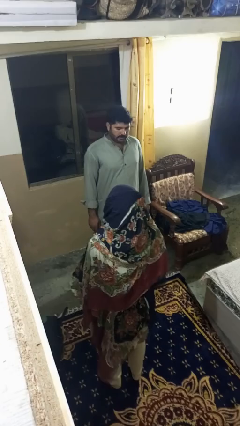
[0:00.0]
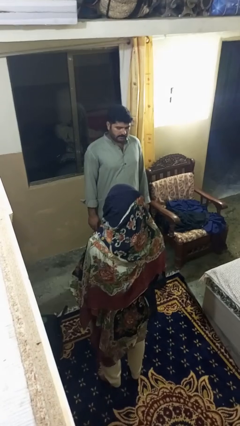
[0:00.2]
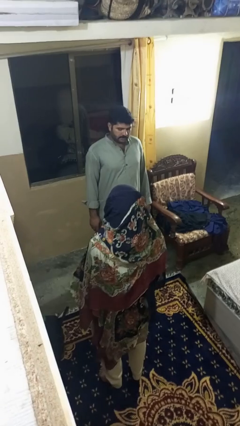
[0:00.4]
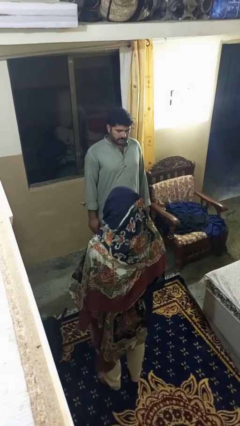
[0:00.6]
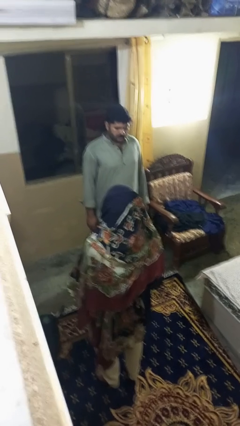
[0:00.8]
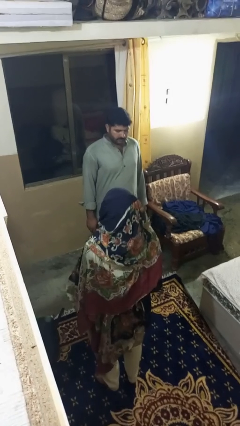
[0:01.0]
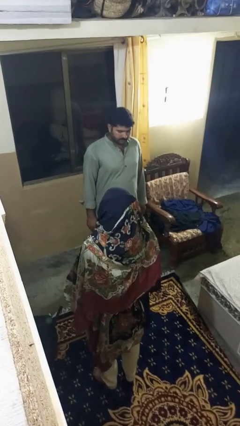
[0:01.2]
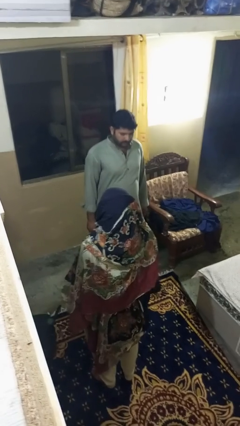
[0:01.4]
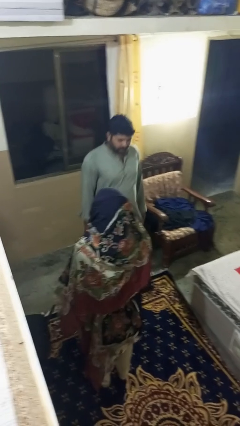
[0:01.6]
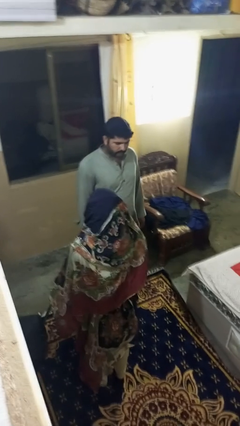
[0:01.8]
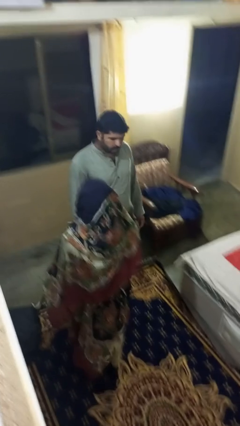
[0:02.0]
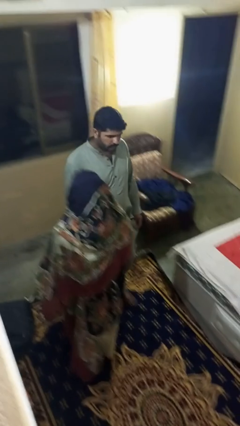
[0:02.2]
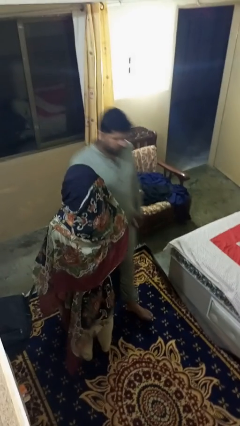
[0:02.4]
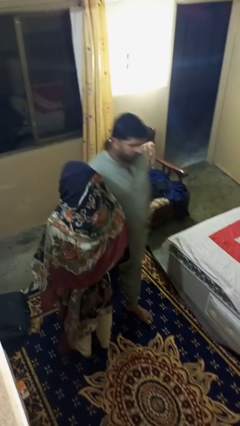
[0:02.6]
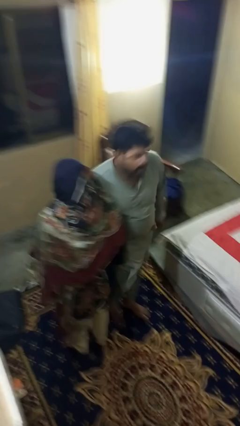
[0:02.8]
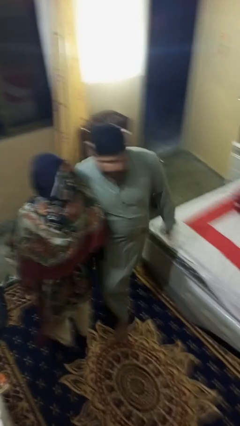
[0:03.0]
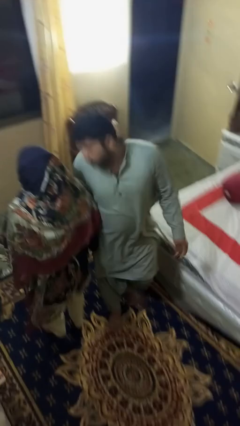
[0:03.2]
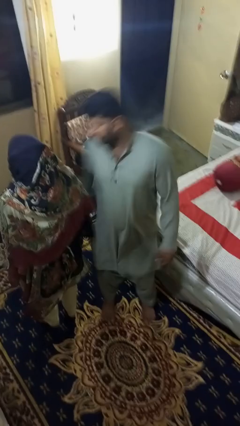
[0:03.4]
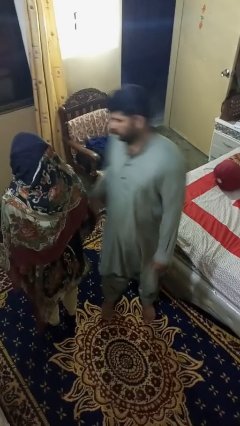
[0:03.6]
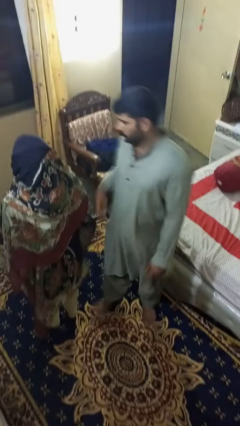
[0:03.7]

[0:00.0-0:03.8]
person bumps into person

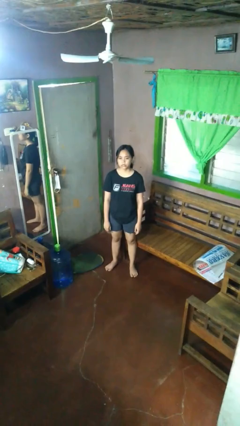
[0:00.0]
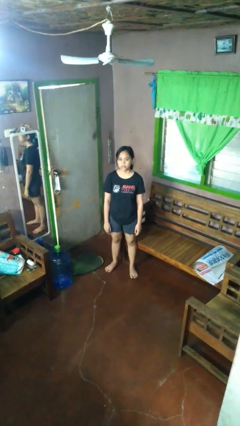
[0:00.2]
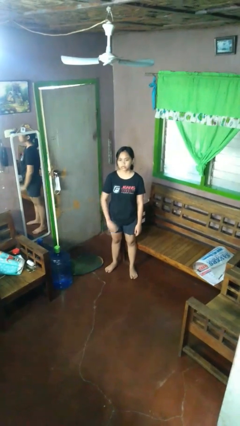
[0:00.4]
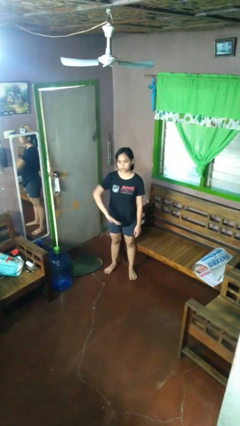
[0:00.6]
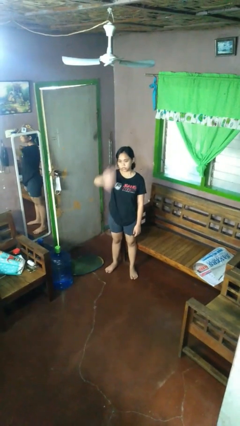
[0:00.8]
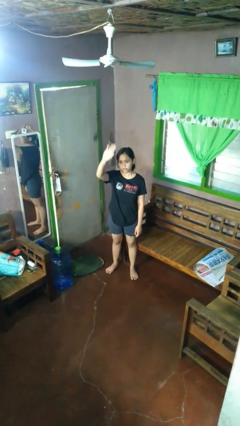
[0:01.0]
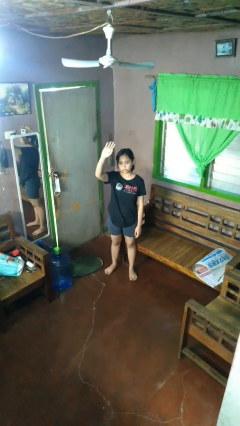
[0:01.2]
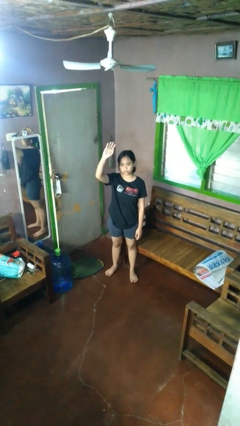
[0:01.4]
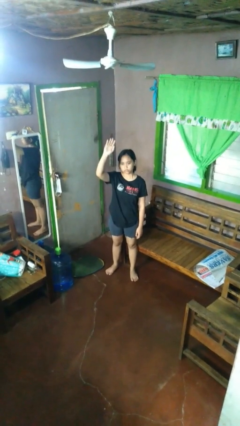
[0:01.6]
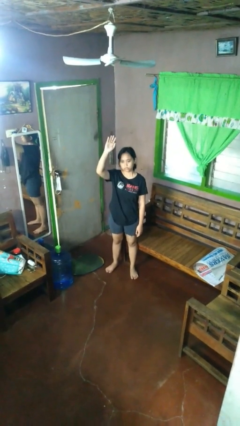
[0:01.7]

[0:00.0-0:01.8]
person gestures swipe up

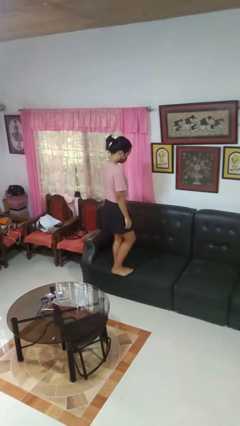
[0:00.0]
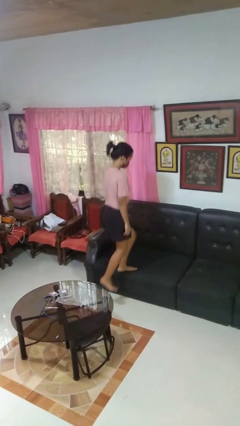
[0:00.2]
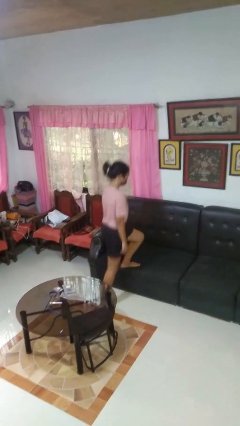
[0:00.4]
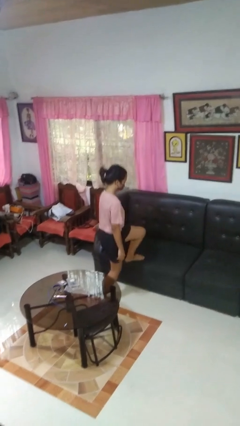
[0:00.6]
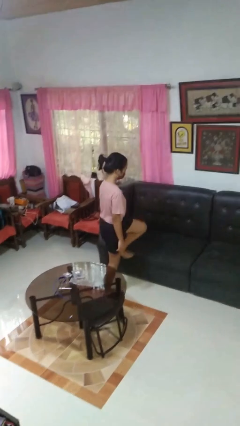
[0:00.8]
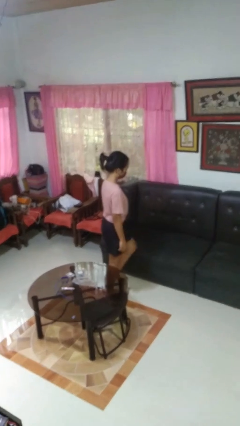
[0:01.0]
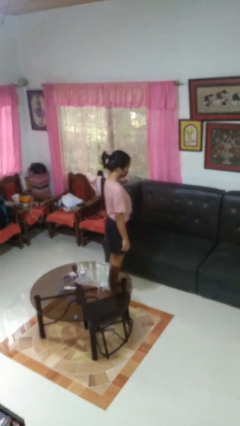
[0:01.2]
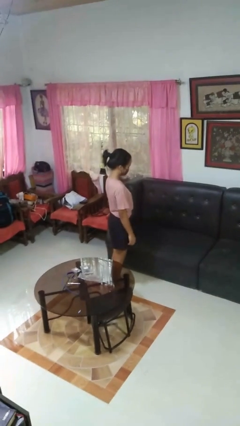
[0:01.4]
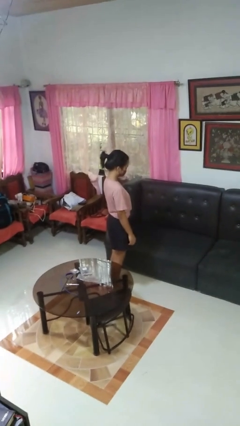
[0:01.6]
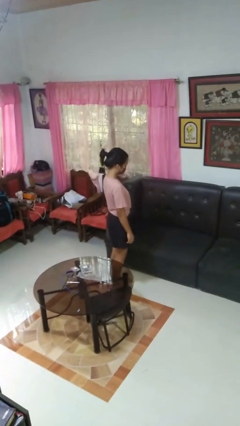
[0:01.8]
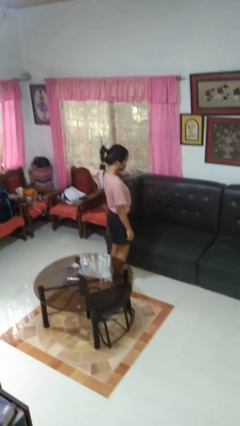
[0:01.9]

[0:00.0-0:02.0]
person climbs off couch

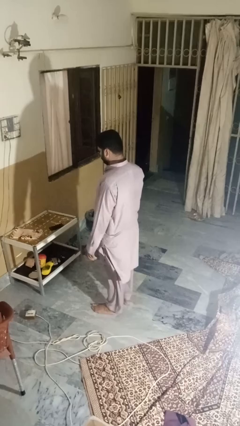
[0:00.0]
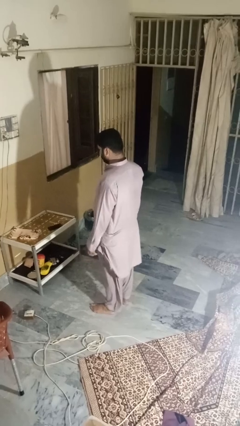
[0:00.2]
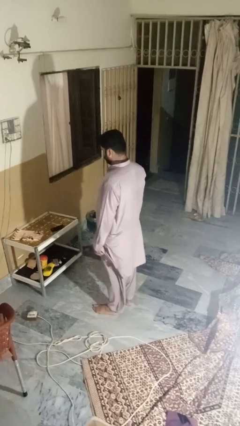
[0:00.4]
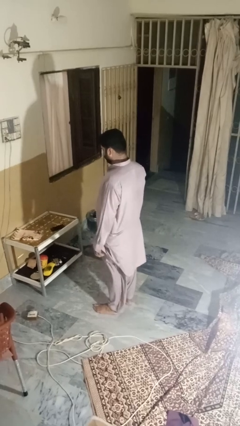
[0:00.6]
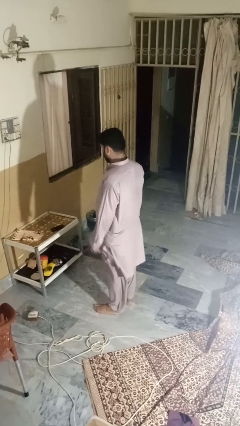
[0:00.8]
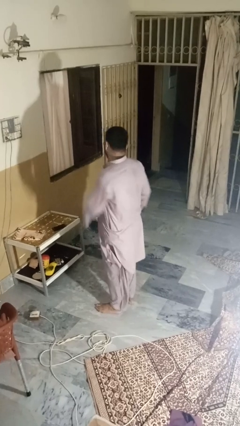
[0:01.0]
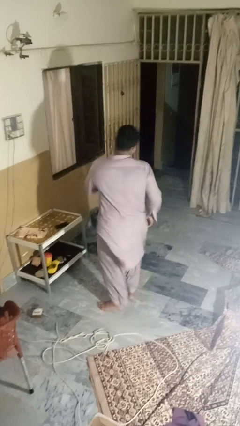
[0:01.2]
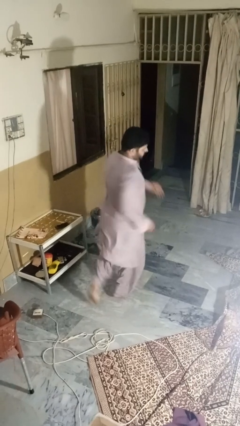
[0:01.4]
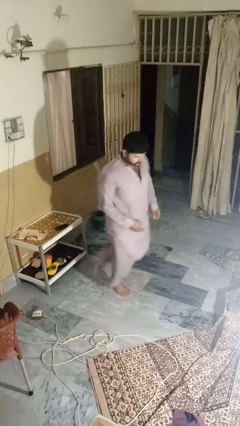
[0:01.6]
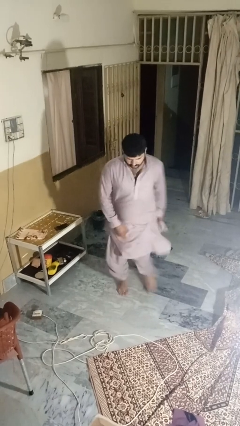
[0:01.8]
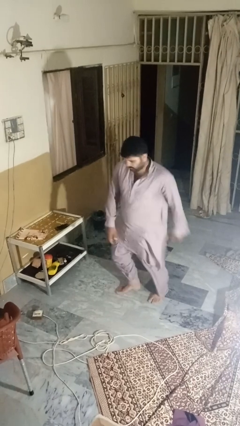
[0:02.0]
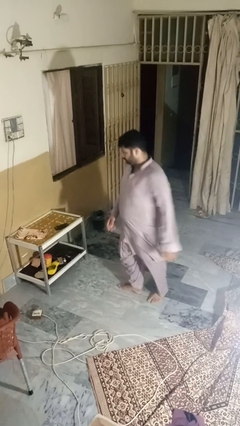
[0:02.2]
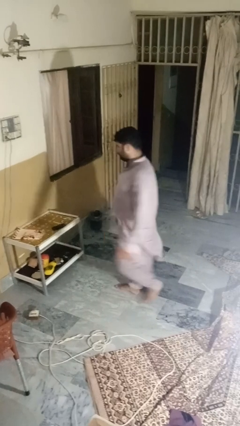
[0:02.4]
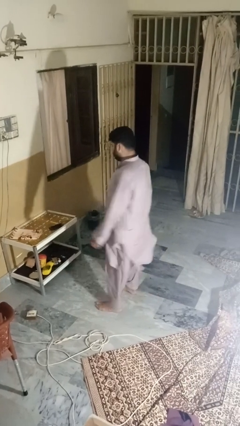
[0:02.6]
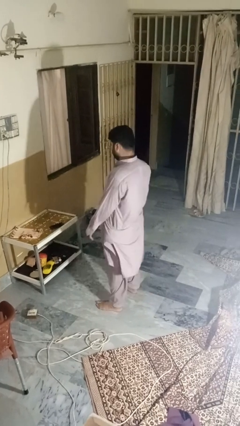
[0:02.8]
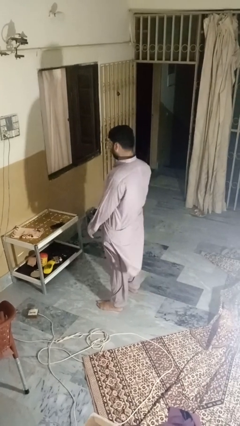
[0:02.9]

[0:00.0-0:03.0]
person twirls

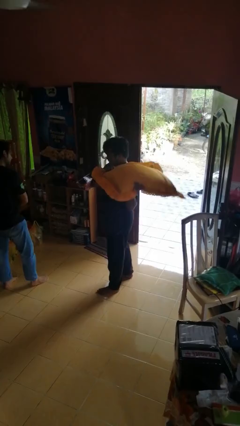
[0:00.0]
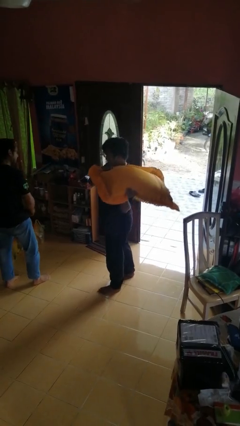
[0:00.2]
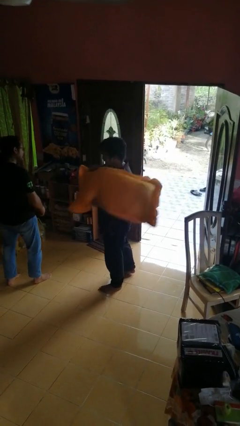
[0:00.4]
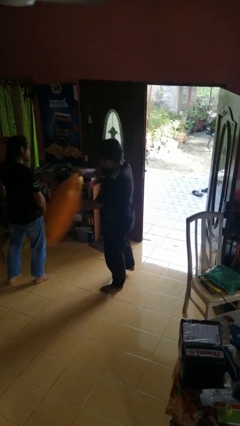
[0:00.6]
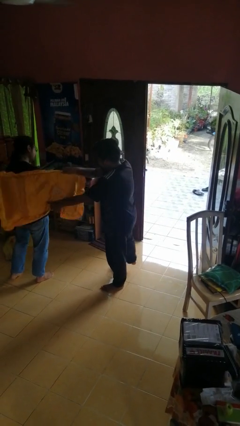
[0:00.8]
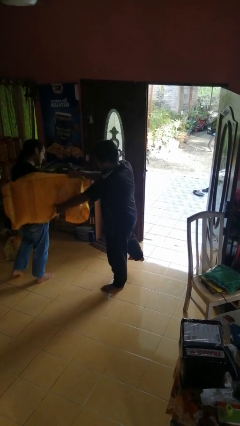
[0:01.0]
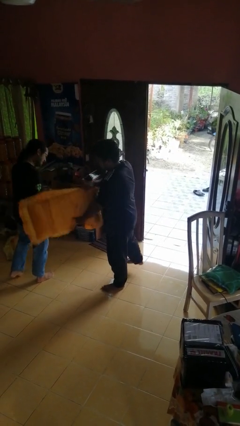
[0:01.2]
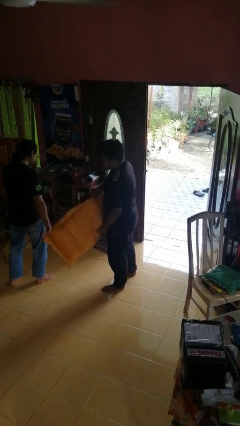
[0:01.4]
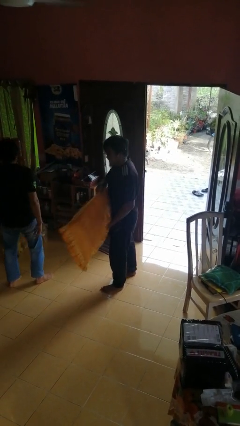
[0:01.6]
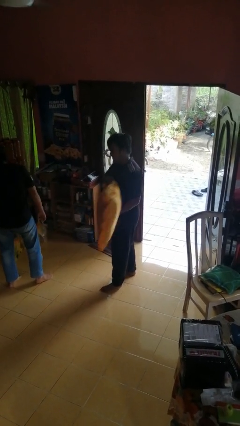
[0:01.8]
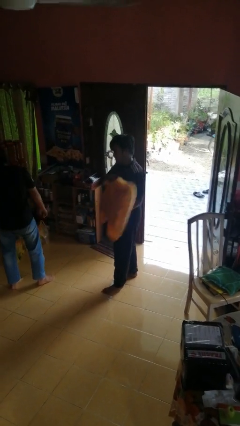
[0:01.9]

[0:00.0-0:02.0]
person hits person with pillow

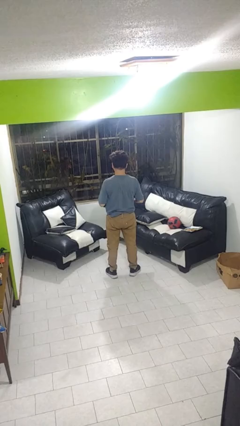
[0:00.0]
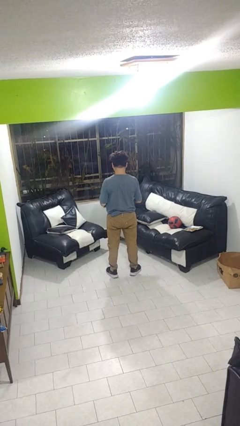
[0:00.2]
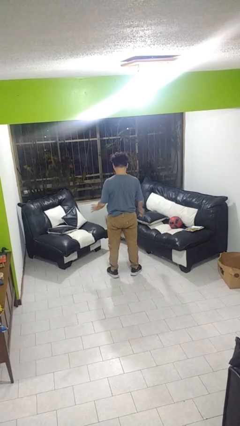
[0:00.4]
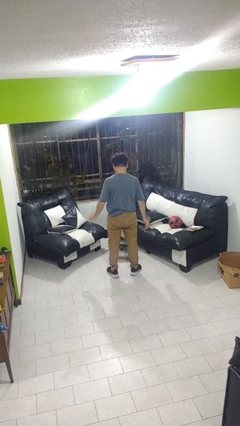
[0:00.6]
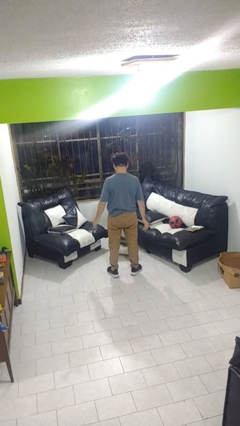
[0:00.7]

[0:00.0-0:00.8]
person drops object

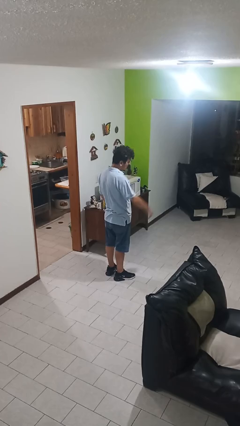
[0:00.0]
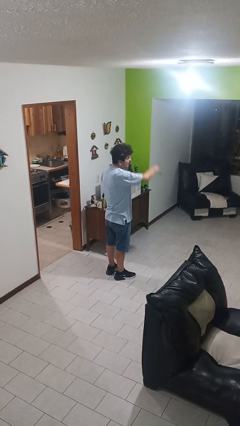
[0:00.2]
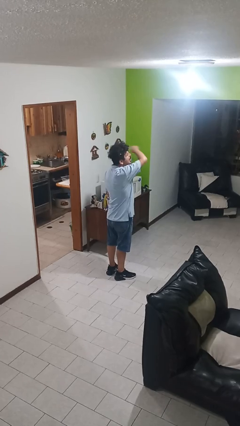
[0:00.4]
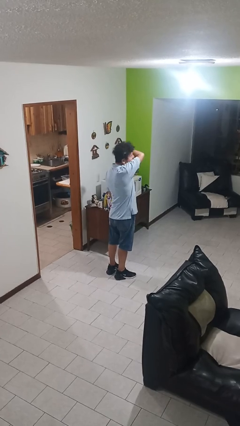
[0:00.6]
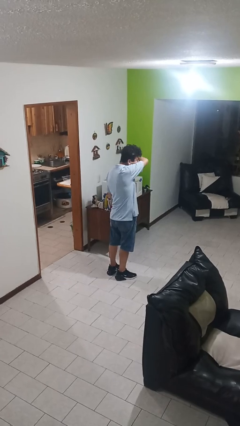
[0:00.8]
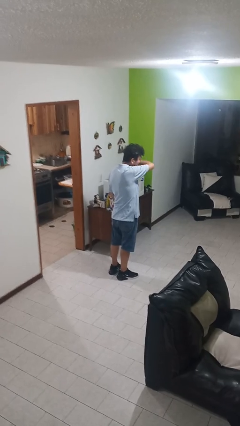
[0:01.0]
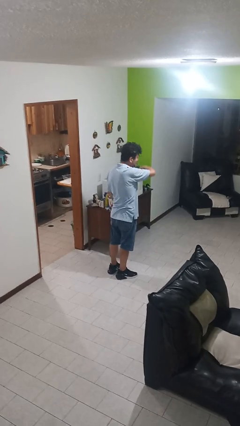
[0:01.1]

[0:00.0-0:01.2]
person sneezes into arm

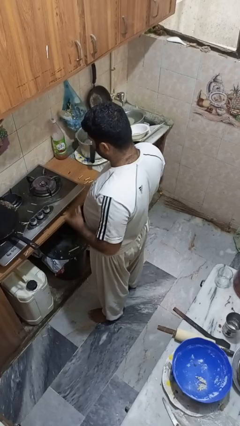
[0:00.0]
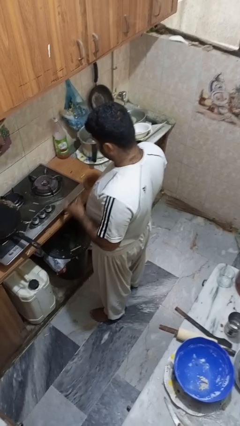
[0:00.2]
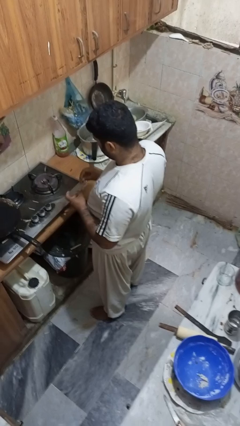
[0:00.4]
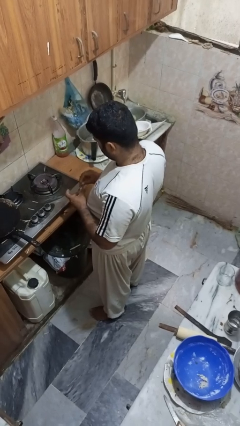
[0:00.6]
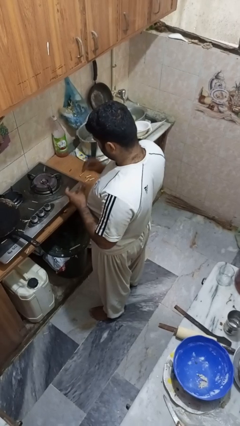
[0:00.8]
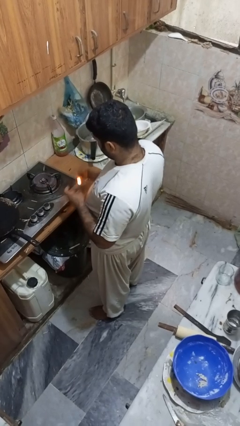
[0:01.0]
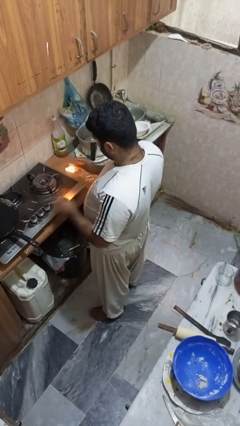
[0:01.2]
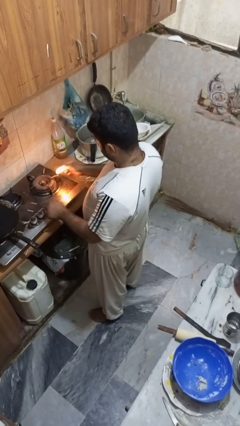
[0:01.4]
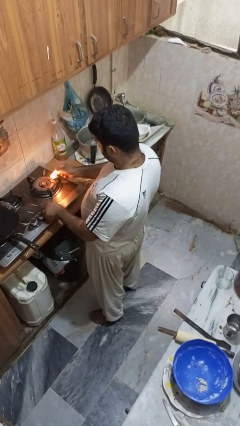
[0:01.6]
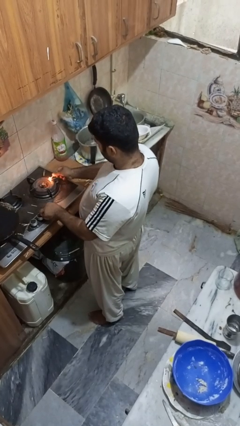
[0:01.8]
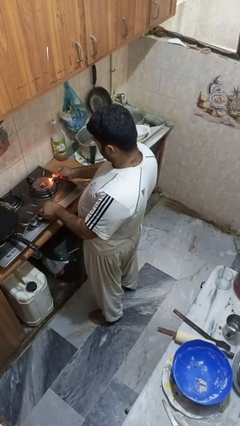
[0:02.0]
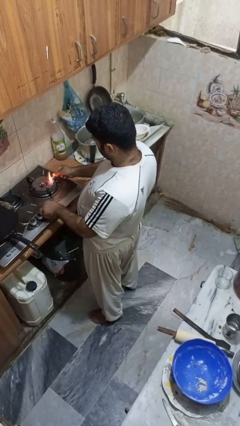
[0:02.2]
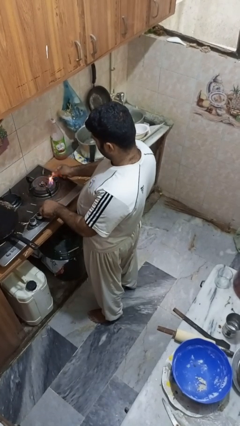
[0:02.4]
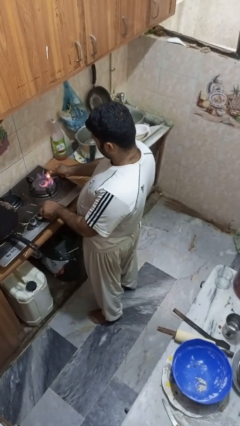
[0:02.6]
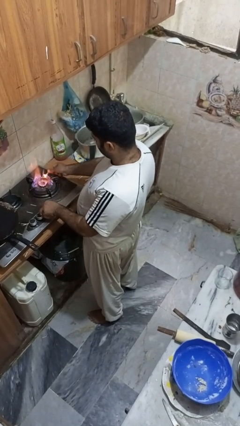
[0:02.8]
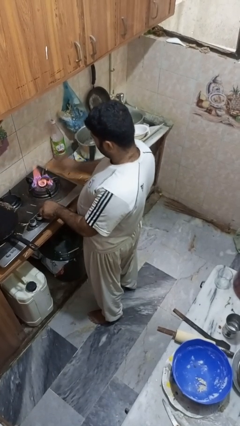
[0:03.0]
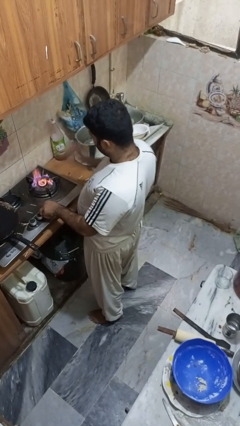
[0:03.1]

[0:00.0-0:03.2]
person turns on stovetop
